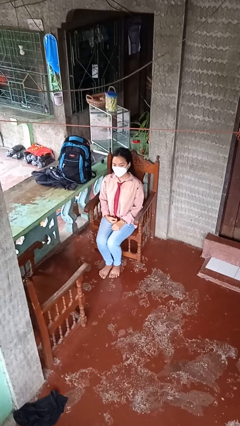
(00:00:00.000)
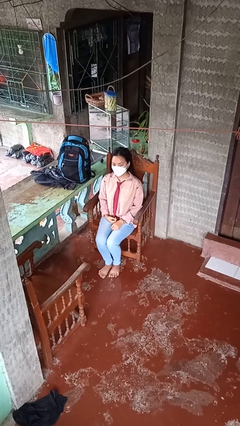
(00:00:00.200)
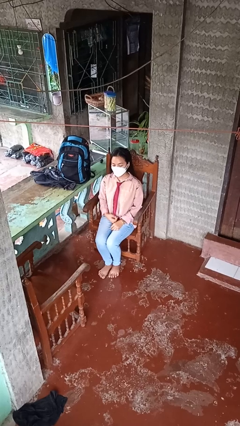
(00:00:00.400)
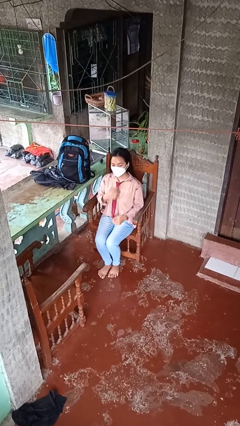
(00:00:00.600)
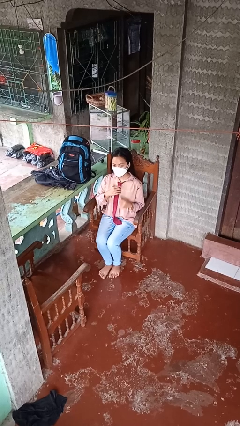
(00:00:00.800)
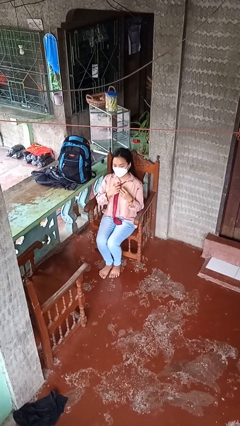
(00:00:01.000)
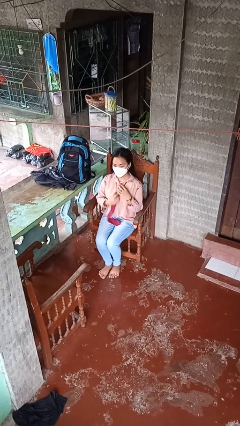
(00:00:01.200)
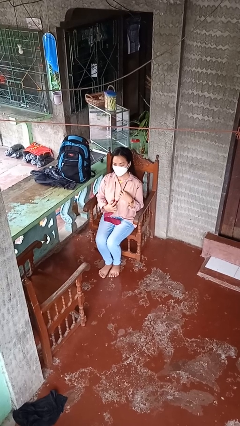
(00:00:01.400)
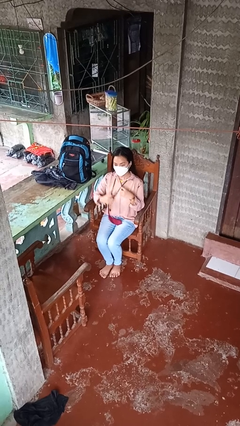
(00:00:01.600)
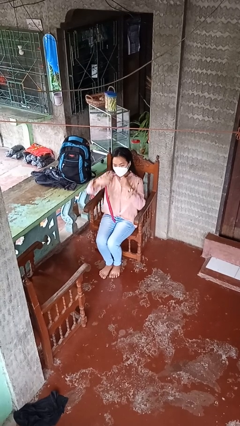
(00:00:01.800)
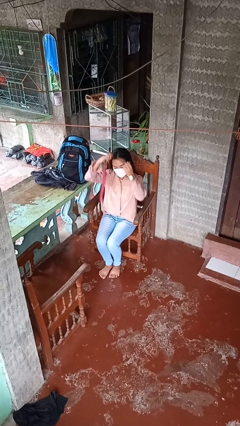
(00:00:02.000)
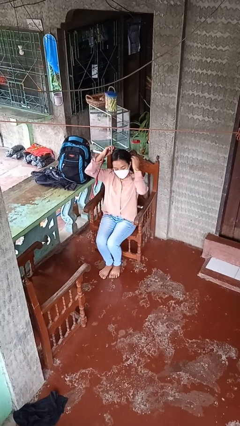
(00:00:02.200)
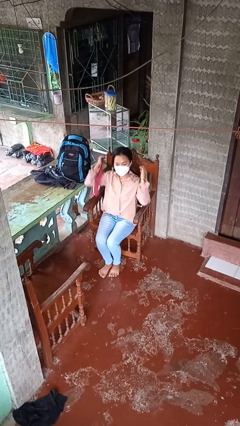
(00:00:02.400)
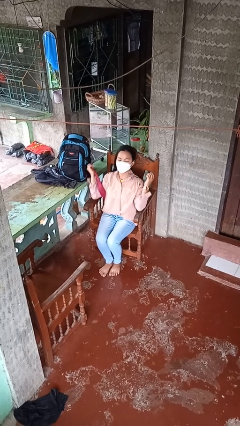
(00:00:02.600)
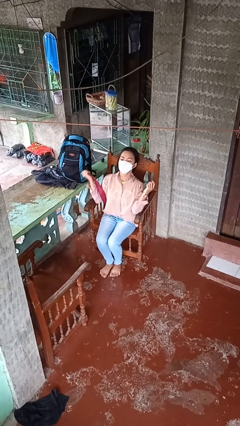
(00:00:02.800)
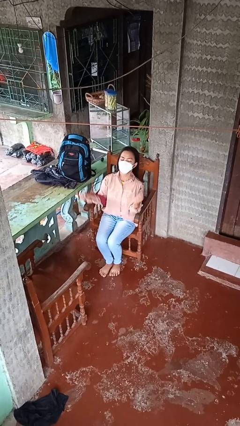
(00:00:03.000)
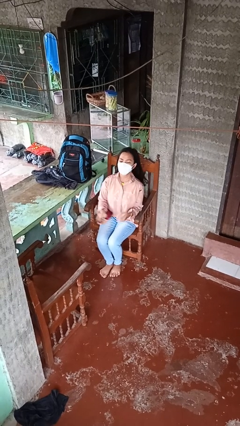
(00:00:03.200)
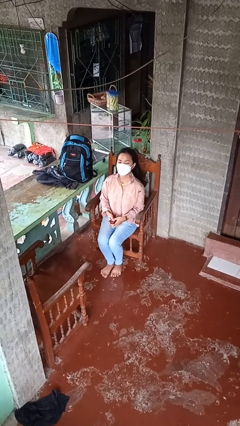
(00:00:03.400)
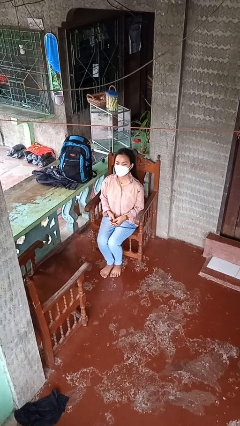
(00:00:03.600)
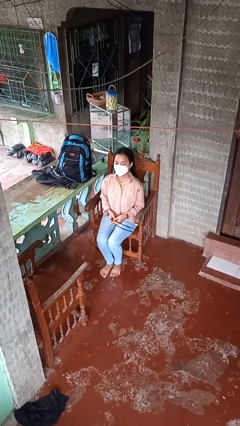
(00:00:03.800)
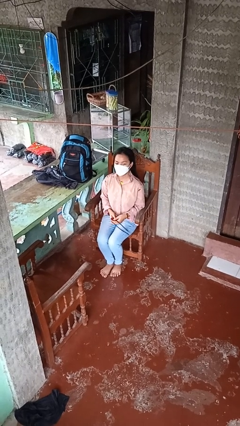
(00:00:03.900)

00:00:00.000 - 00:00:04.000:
person takes off necktie

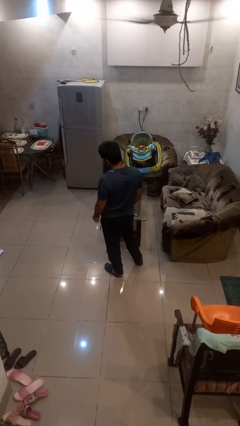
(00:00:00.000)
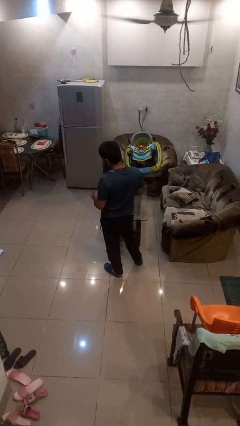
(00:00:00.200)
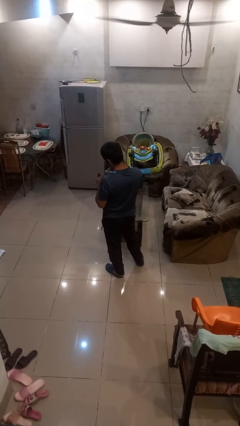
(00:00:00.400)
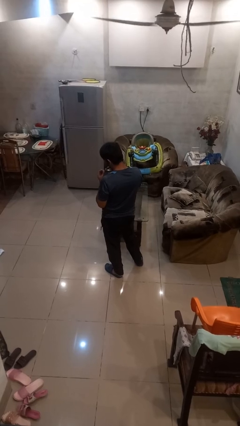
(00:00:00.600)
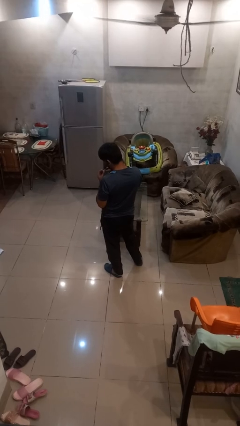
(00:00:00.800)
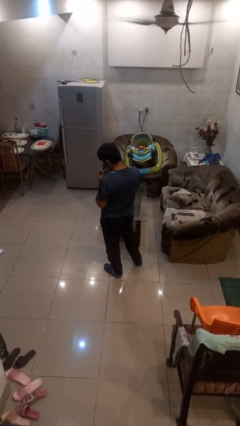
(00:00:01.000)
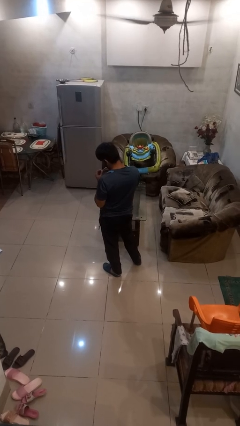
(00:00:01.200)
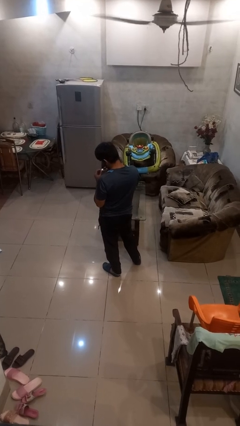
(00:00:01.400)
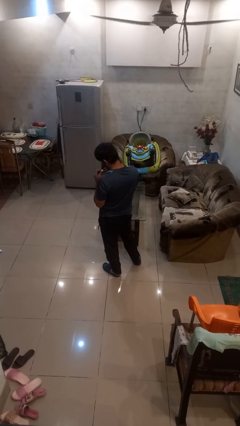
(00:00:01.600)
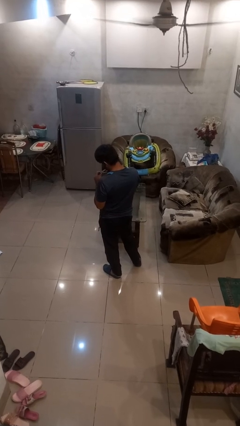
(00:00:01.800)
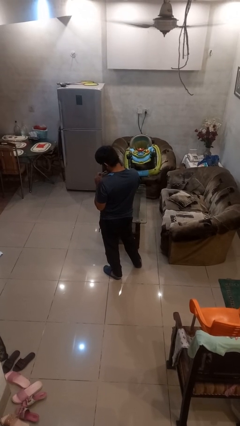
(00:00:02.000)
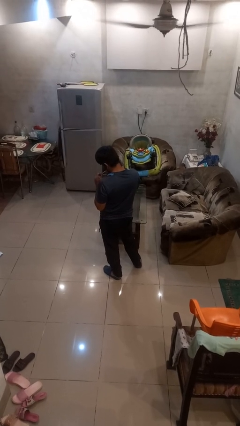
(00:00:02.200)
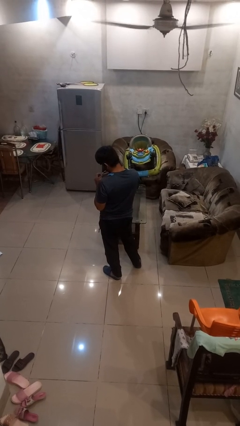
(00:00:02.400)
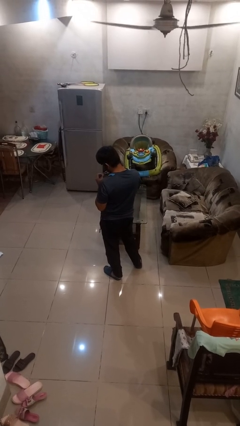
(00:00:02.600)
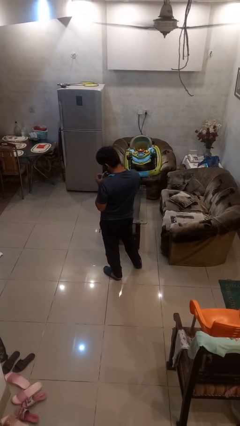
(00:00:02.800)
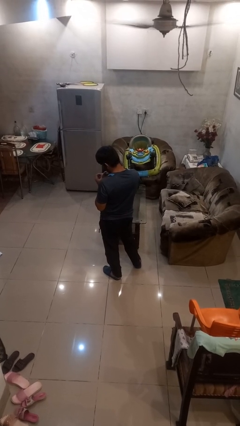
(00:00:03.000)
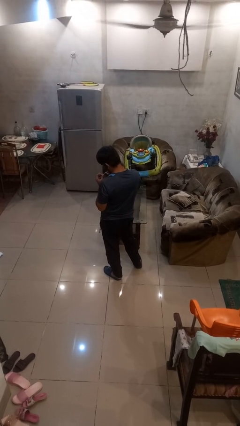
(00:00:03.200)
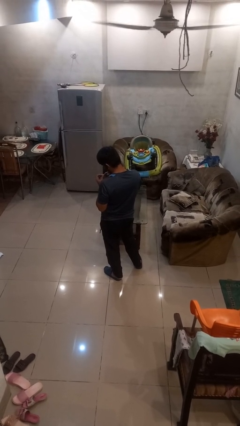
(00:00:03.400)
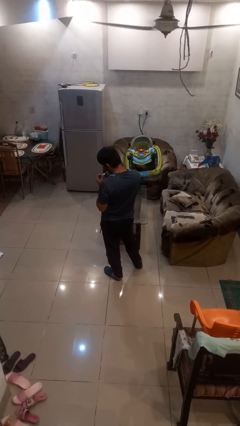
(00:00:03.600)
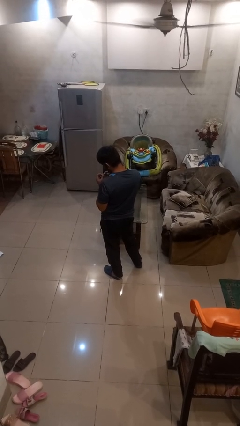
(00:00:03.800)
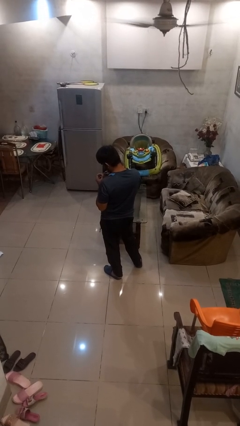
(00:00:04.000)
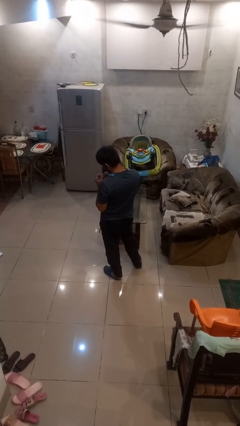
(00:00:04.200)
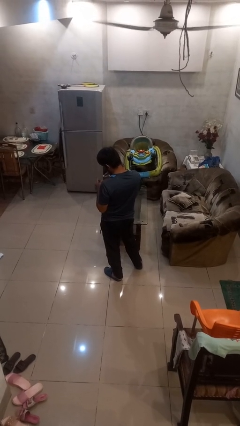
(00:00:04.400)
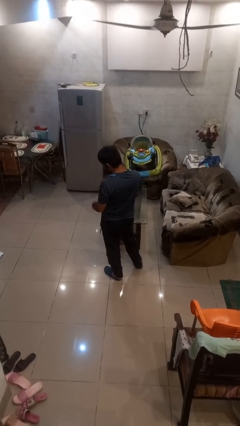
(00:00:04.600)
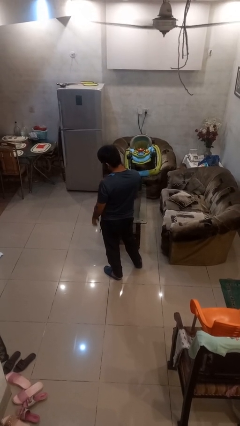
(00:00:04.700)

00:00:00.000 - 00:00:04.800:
person clips fingernails

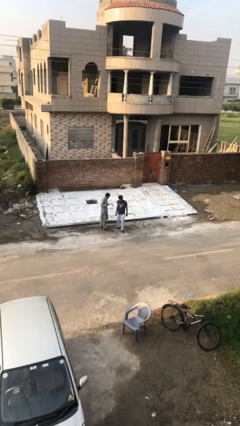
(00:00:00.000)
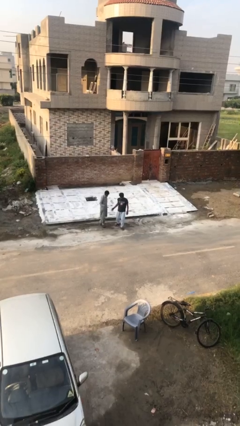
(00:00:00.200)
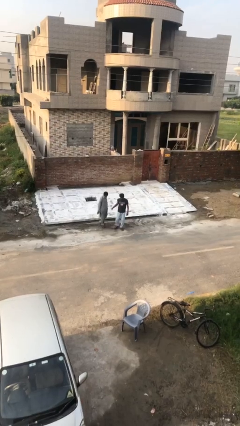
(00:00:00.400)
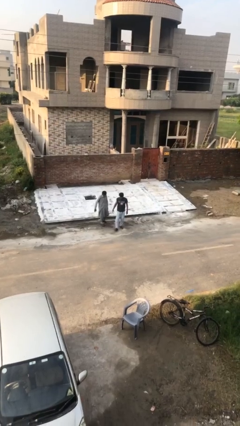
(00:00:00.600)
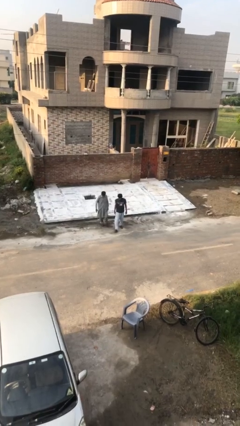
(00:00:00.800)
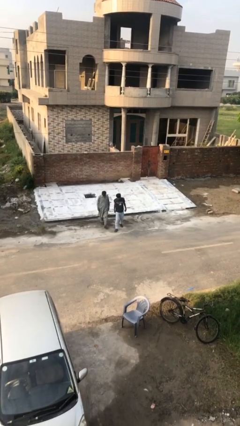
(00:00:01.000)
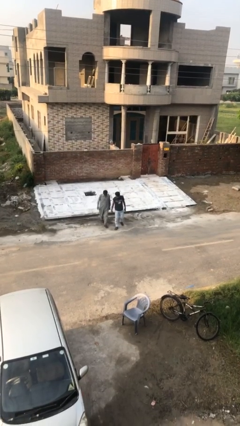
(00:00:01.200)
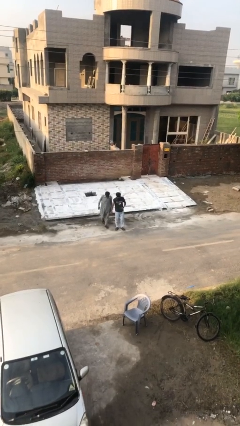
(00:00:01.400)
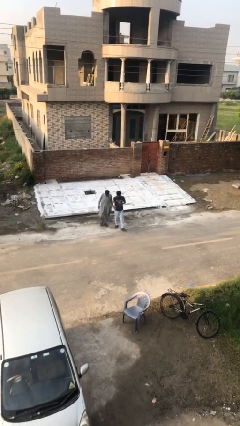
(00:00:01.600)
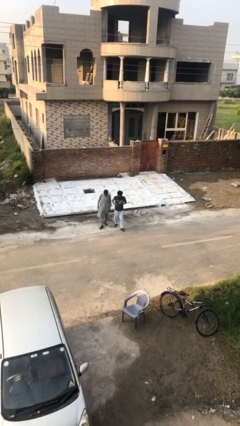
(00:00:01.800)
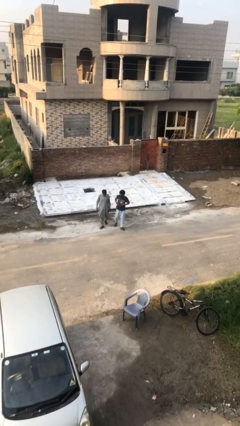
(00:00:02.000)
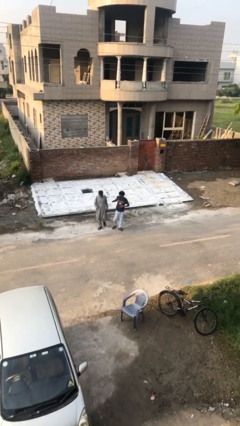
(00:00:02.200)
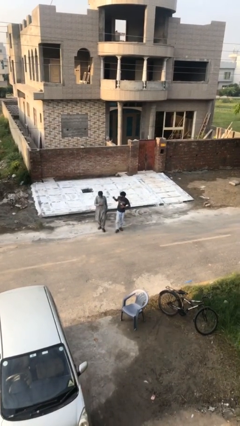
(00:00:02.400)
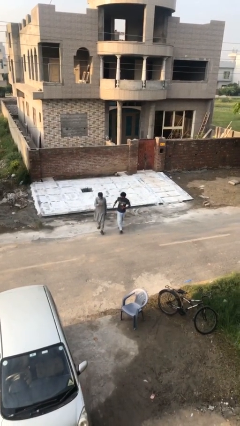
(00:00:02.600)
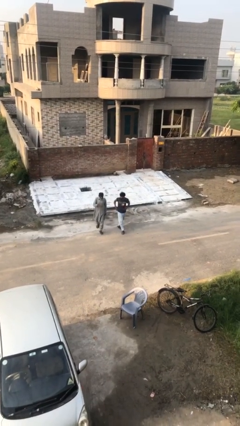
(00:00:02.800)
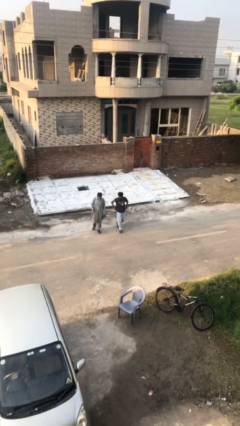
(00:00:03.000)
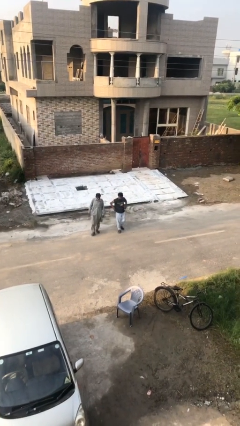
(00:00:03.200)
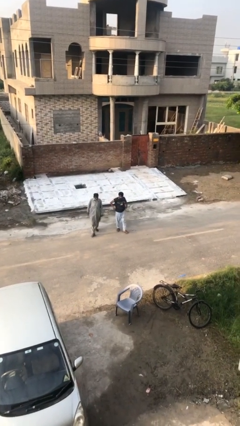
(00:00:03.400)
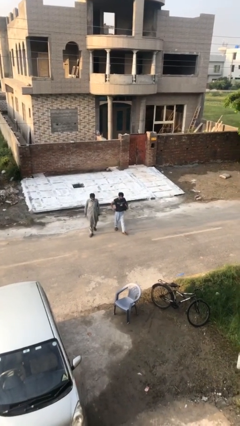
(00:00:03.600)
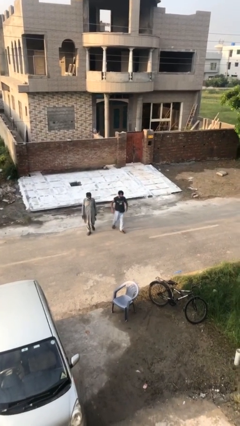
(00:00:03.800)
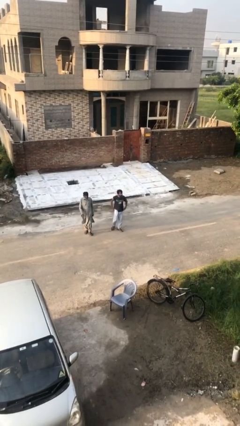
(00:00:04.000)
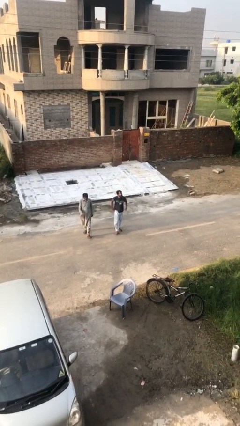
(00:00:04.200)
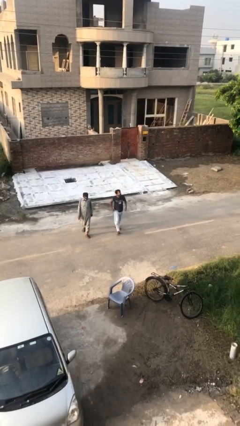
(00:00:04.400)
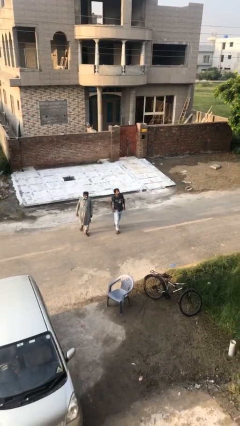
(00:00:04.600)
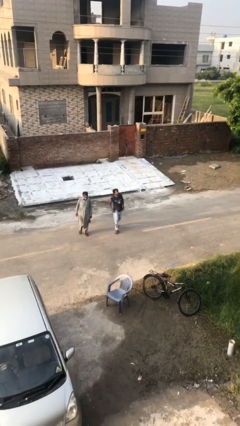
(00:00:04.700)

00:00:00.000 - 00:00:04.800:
person talks to person

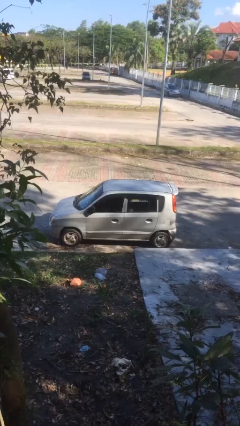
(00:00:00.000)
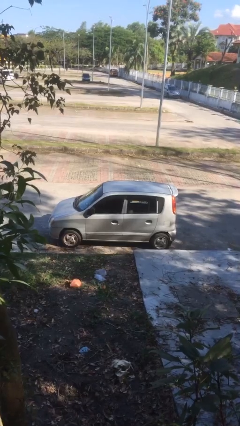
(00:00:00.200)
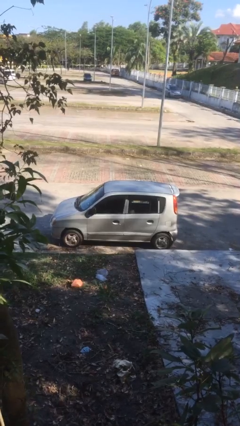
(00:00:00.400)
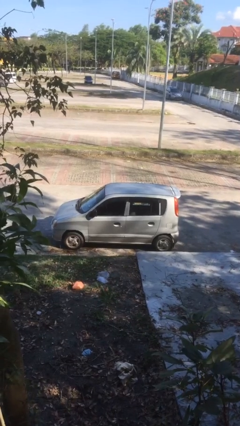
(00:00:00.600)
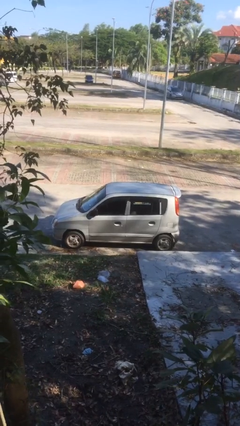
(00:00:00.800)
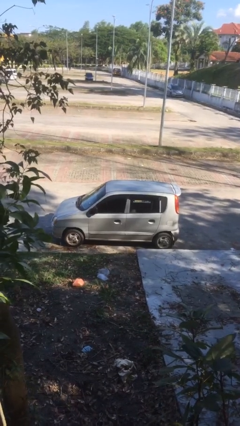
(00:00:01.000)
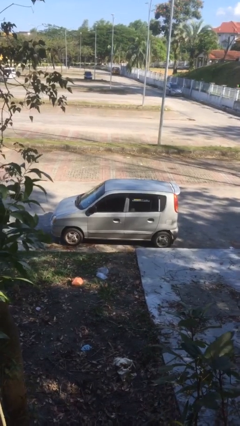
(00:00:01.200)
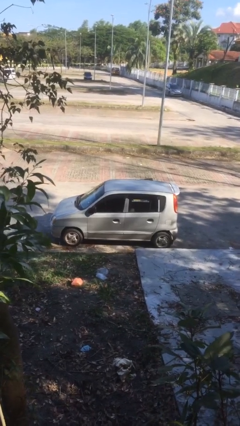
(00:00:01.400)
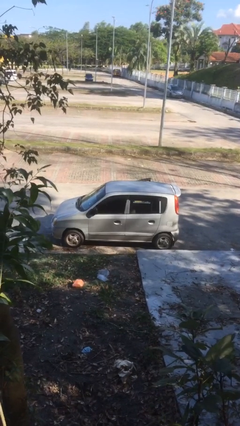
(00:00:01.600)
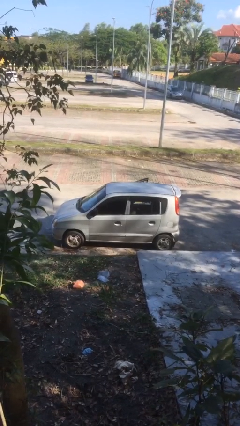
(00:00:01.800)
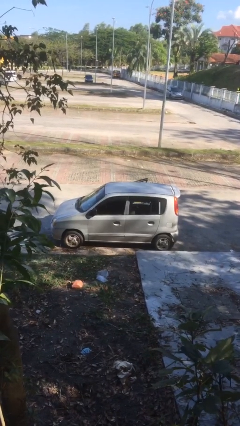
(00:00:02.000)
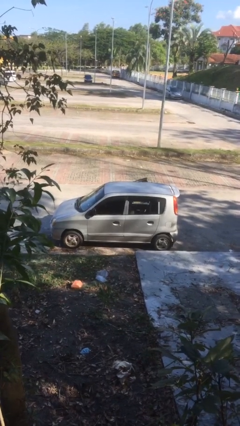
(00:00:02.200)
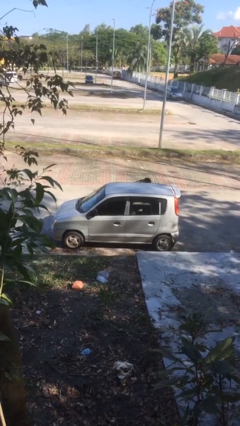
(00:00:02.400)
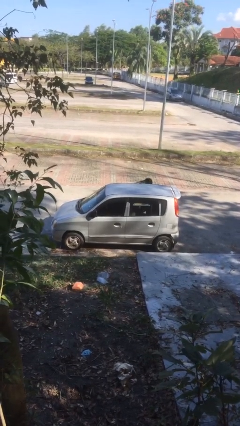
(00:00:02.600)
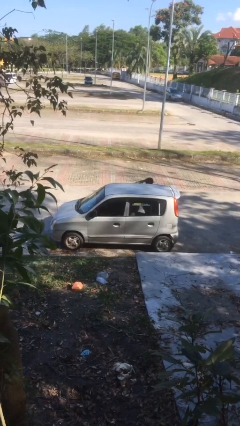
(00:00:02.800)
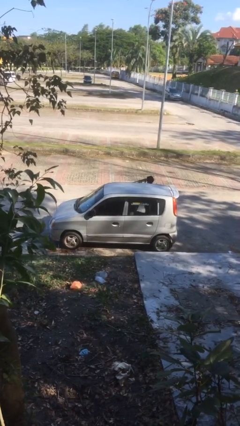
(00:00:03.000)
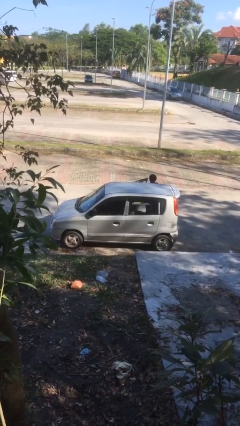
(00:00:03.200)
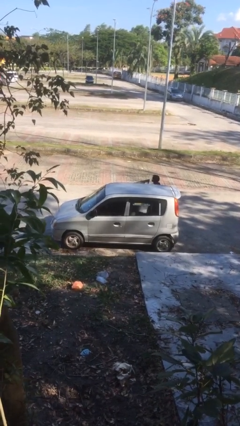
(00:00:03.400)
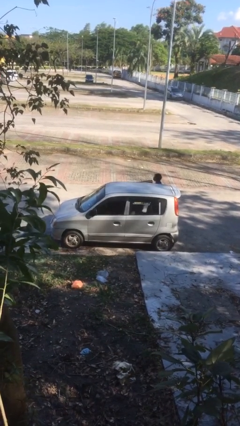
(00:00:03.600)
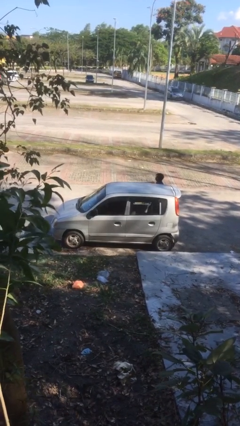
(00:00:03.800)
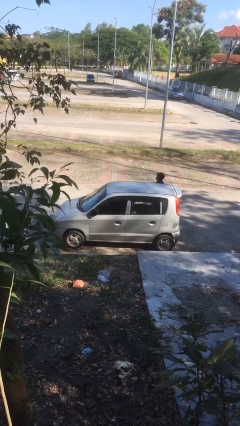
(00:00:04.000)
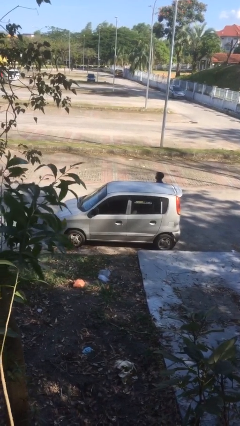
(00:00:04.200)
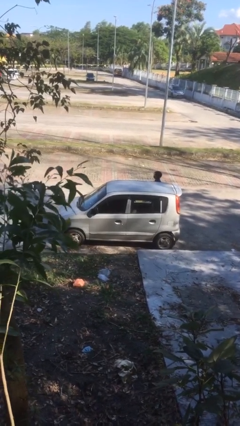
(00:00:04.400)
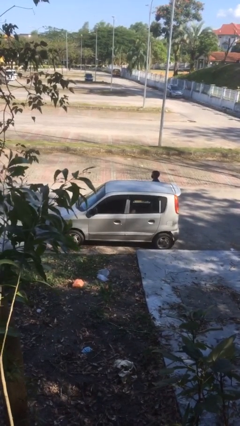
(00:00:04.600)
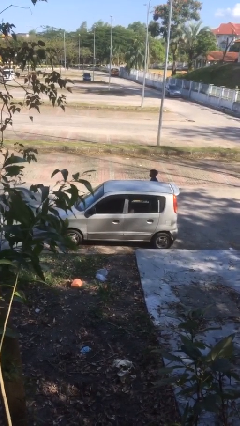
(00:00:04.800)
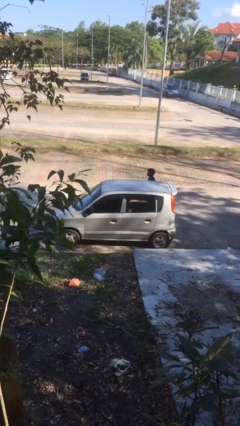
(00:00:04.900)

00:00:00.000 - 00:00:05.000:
car drops off person
